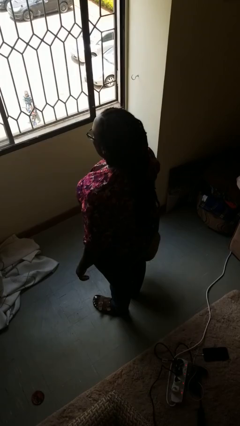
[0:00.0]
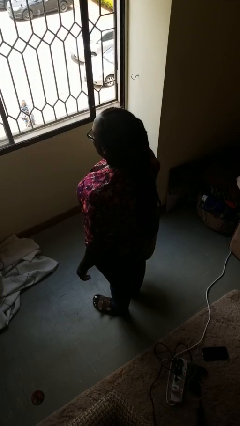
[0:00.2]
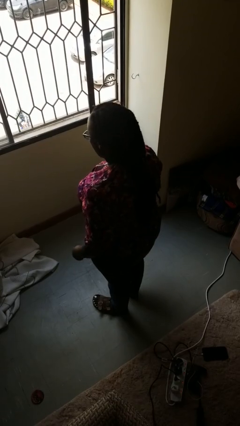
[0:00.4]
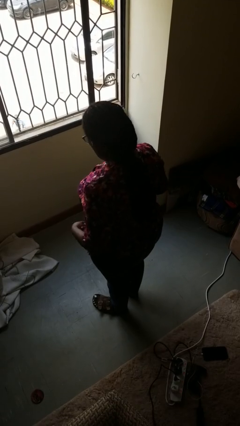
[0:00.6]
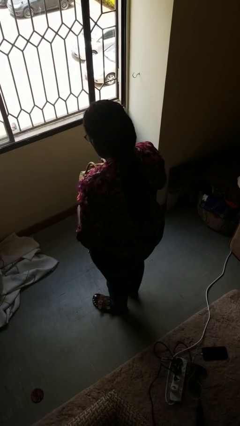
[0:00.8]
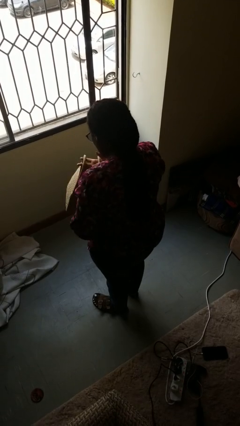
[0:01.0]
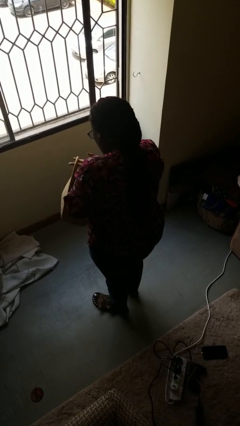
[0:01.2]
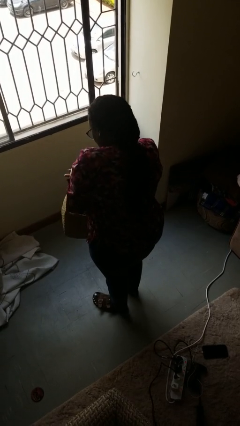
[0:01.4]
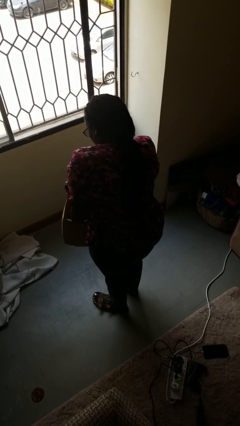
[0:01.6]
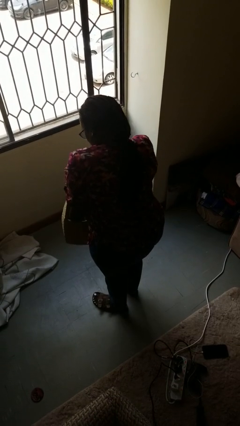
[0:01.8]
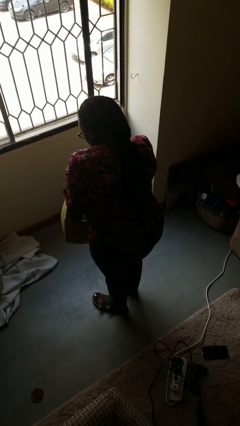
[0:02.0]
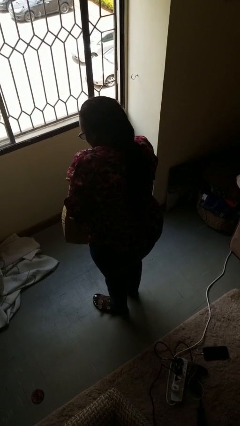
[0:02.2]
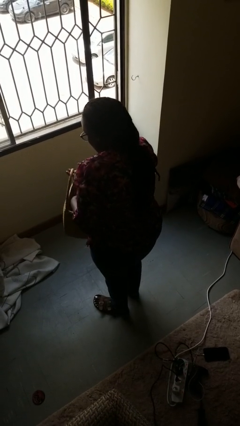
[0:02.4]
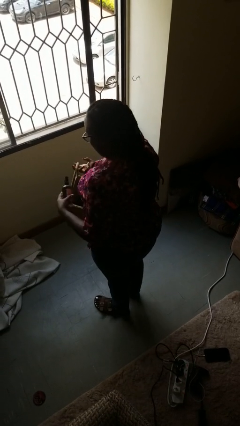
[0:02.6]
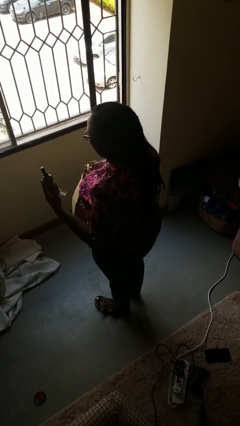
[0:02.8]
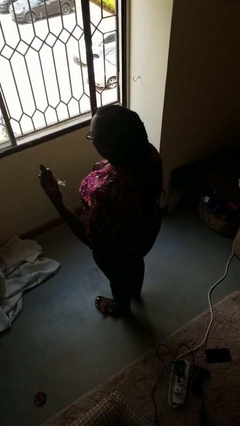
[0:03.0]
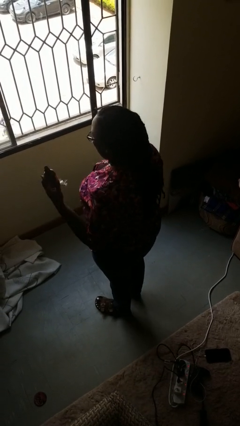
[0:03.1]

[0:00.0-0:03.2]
person takes object from basket

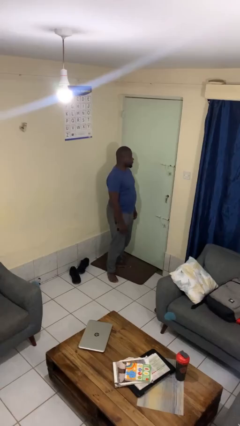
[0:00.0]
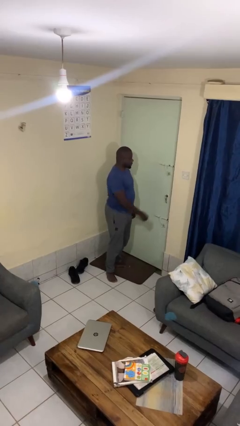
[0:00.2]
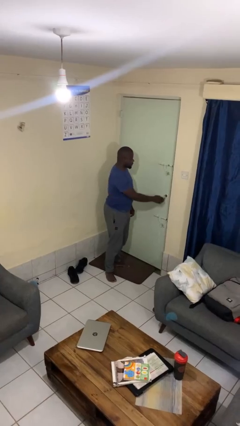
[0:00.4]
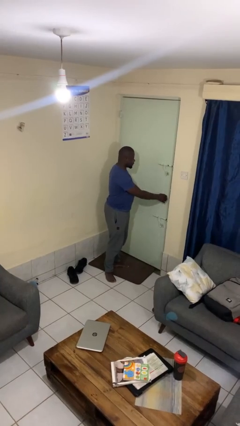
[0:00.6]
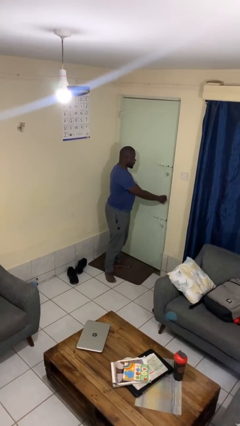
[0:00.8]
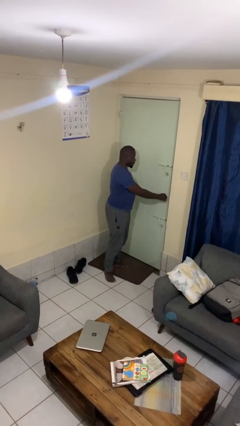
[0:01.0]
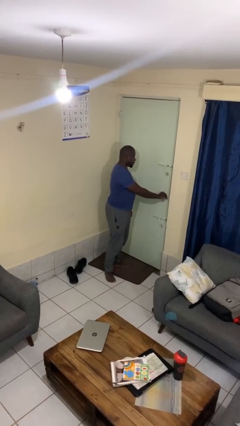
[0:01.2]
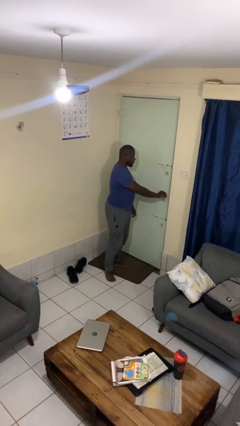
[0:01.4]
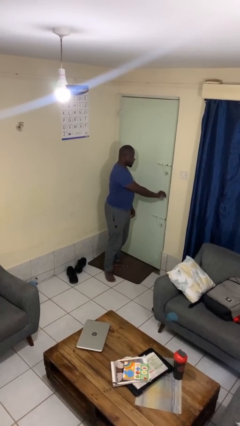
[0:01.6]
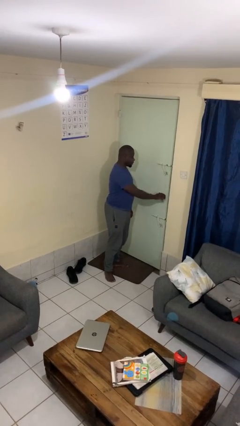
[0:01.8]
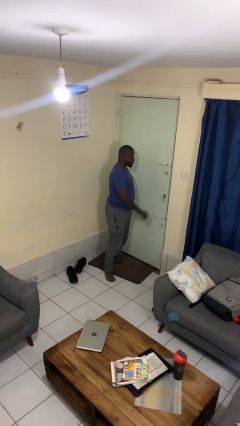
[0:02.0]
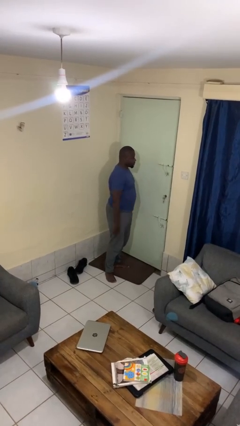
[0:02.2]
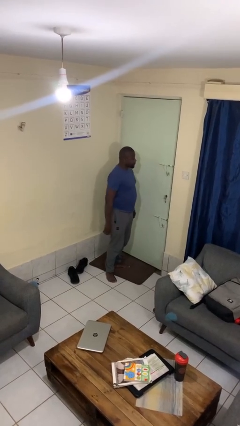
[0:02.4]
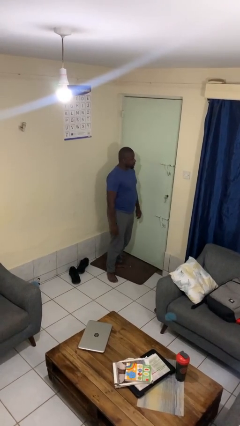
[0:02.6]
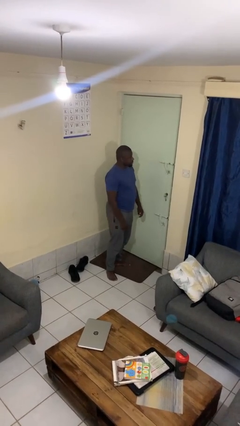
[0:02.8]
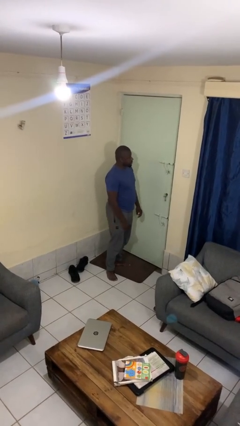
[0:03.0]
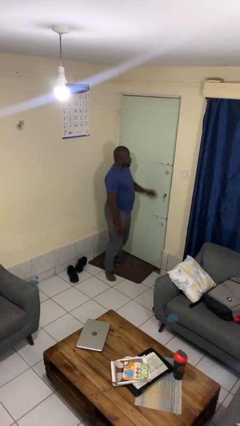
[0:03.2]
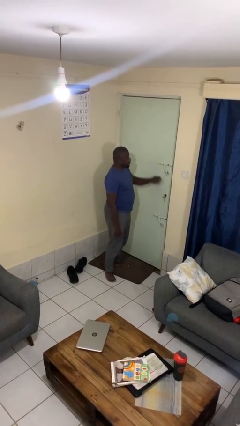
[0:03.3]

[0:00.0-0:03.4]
person unlocks door with keys

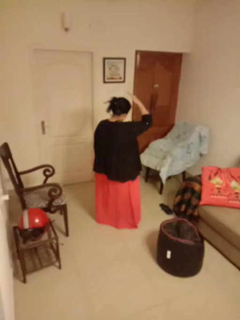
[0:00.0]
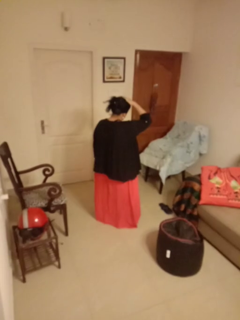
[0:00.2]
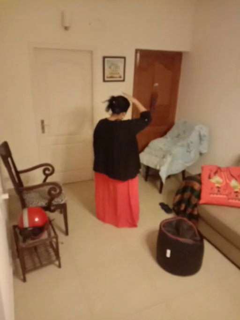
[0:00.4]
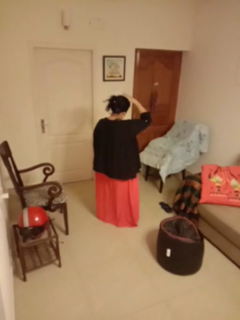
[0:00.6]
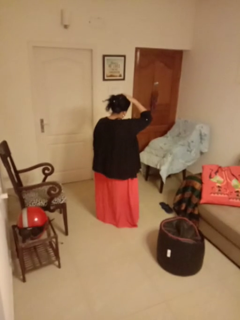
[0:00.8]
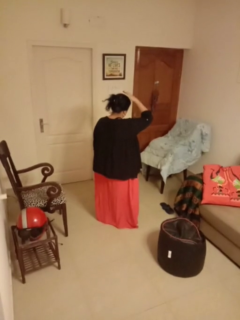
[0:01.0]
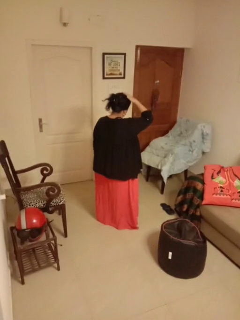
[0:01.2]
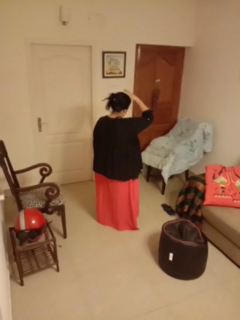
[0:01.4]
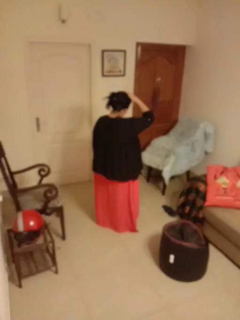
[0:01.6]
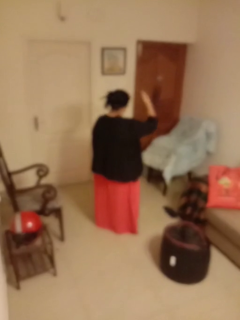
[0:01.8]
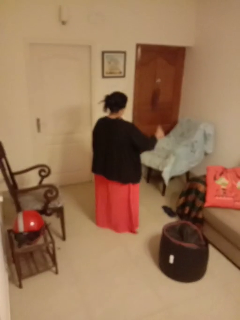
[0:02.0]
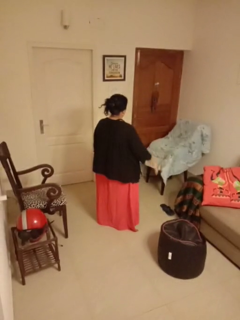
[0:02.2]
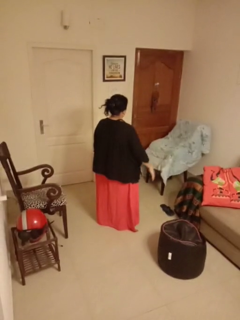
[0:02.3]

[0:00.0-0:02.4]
person pats head

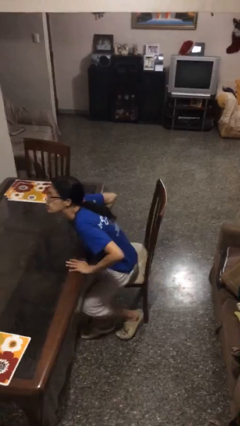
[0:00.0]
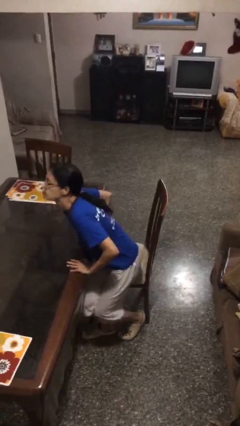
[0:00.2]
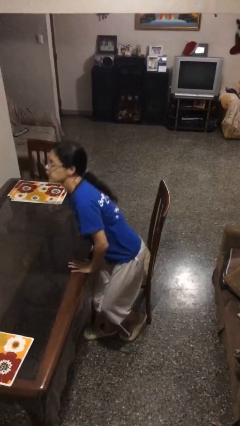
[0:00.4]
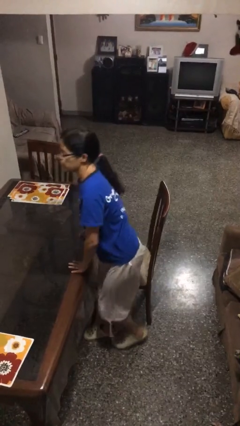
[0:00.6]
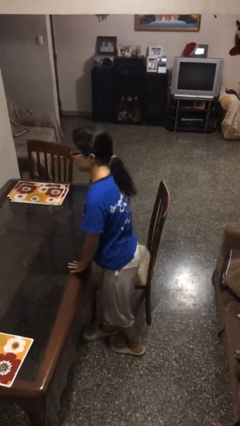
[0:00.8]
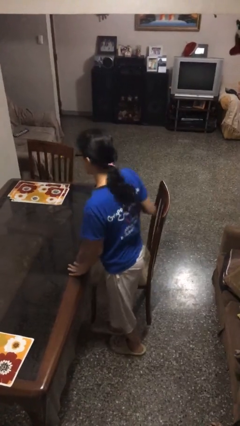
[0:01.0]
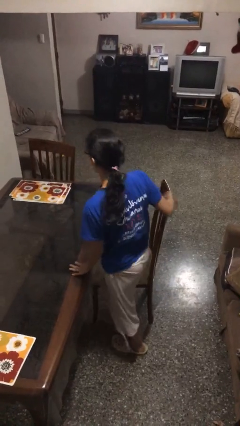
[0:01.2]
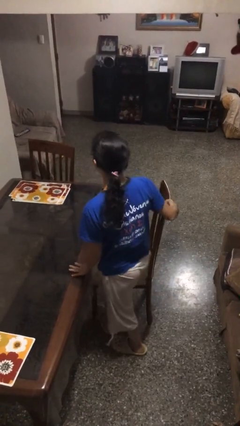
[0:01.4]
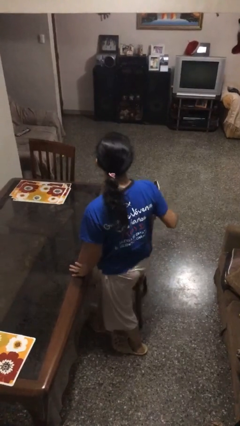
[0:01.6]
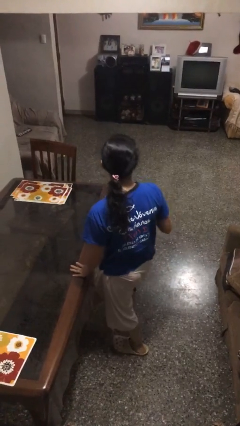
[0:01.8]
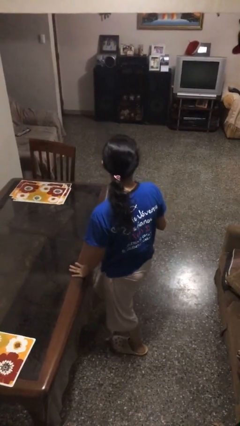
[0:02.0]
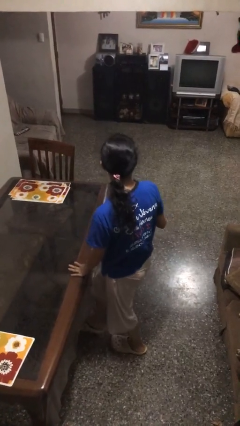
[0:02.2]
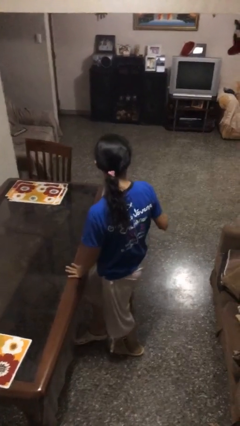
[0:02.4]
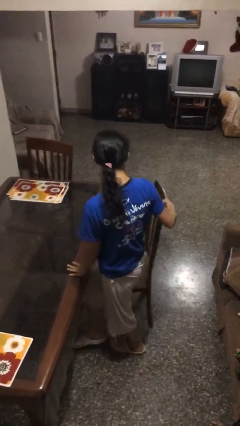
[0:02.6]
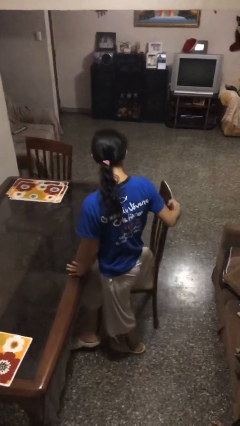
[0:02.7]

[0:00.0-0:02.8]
person stands up

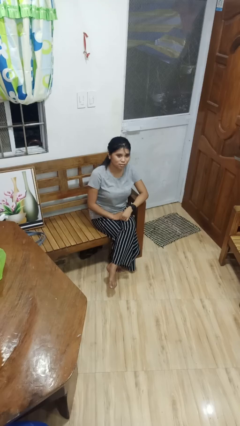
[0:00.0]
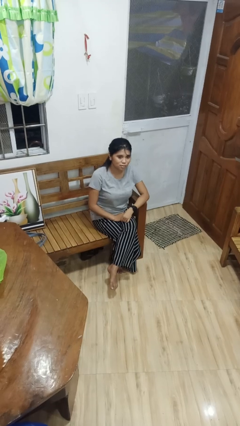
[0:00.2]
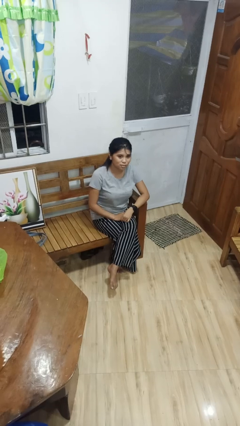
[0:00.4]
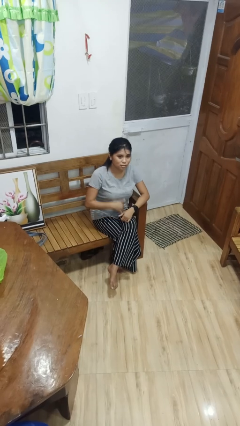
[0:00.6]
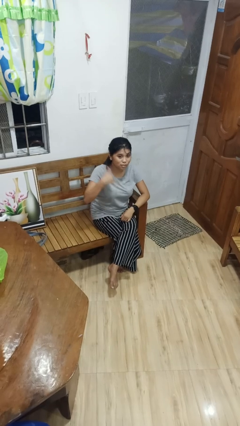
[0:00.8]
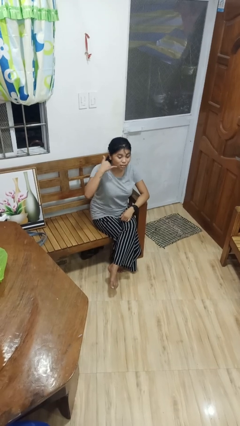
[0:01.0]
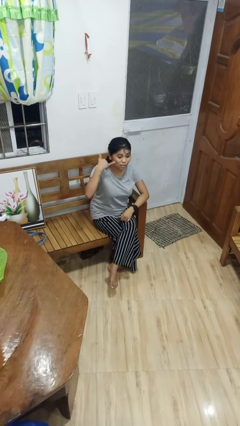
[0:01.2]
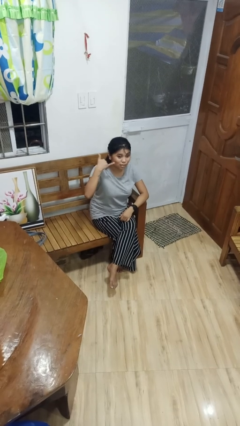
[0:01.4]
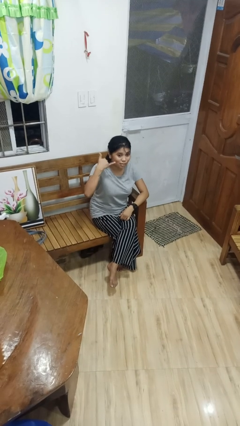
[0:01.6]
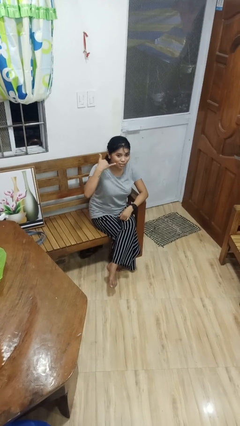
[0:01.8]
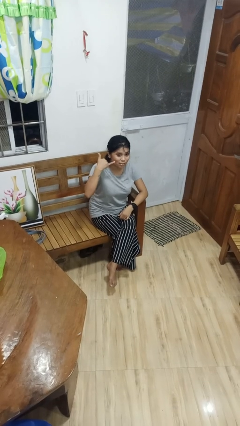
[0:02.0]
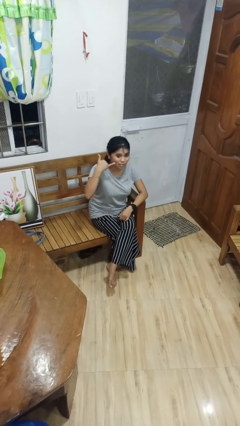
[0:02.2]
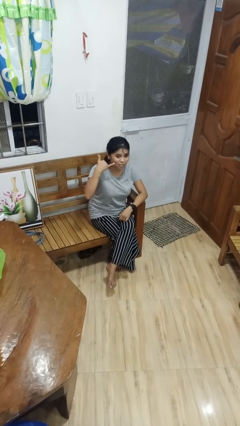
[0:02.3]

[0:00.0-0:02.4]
person gestures call me

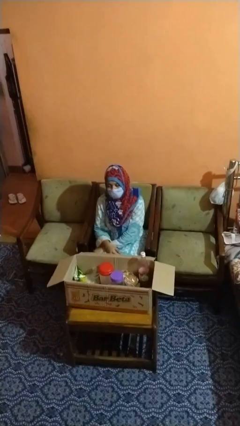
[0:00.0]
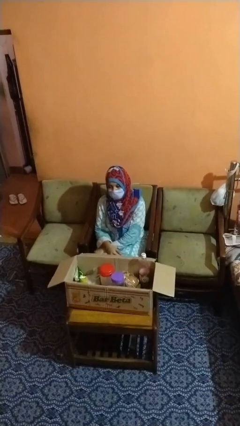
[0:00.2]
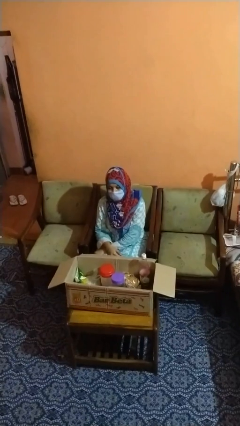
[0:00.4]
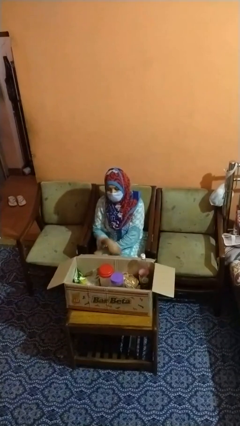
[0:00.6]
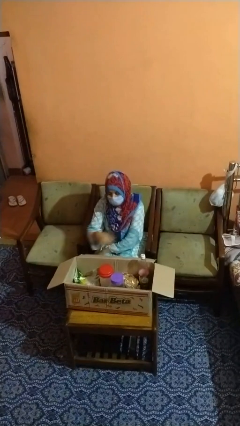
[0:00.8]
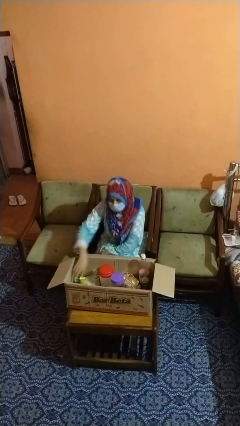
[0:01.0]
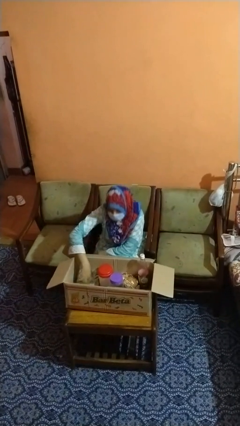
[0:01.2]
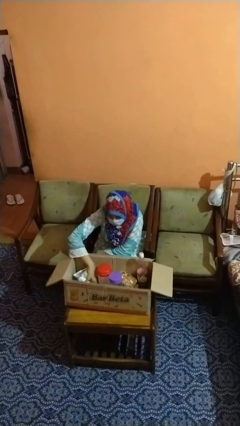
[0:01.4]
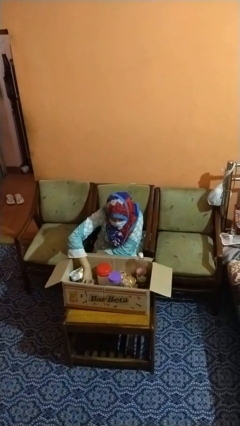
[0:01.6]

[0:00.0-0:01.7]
person searches in box

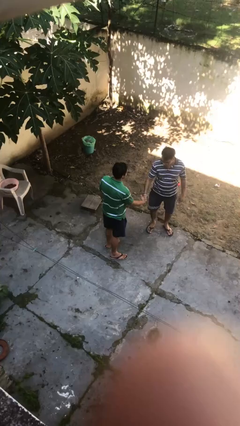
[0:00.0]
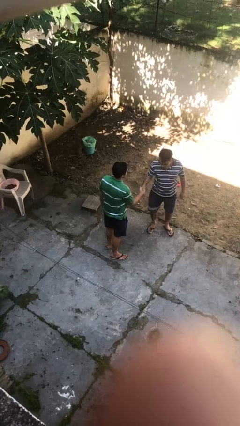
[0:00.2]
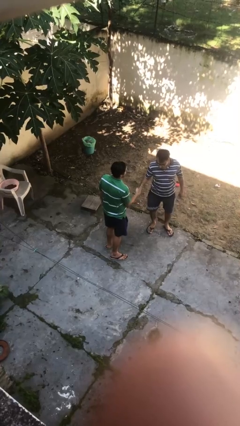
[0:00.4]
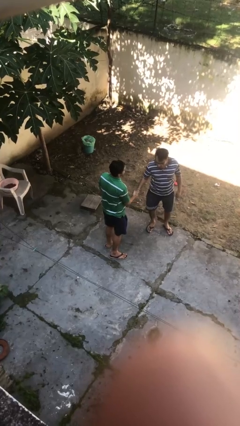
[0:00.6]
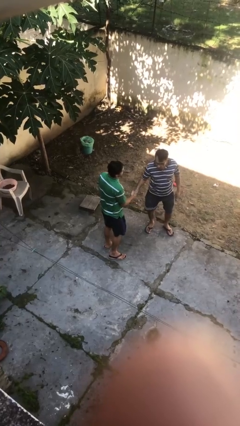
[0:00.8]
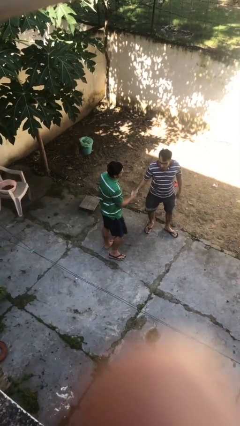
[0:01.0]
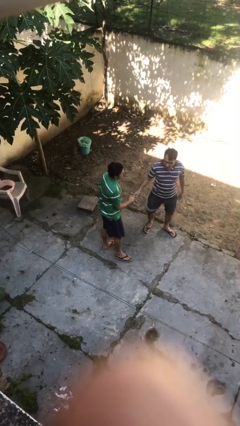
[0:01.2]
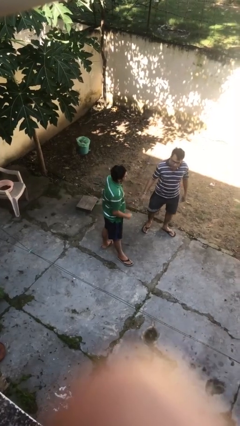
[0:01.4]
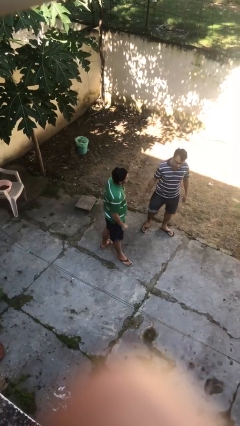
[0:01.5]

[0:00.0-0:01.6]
person shakes hand

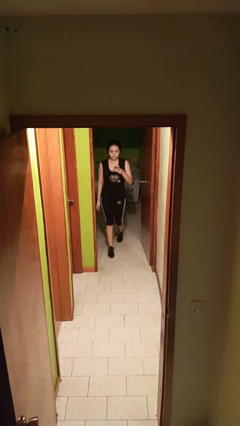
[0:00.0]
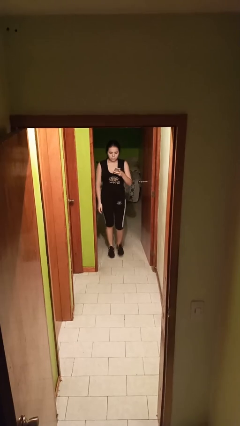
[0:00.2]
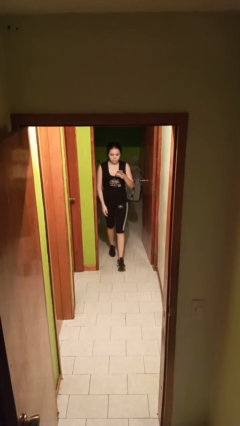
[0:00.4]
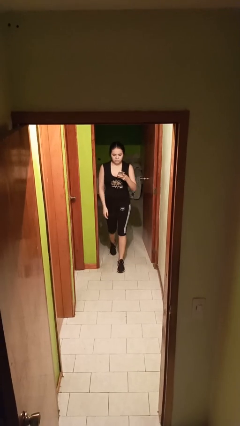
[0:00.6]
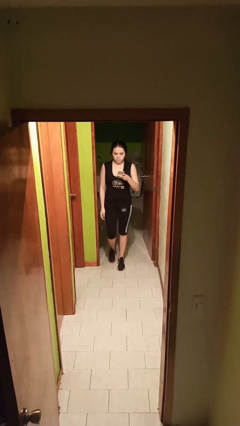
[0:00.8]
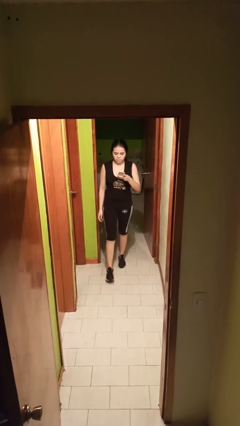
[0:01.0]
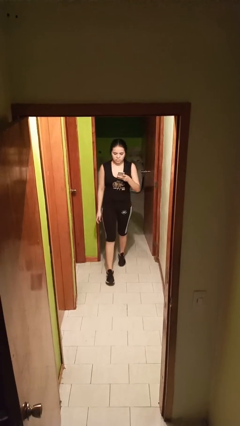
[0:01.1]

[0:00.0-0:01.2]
person enters scene through structure
